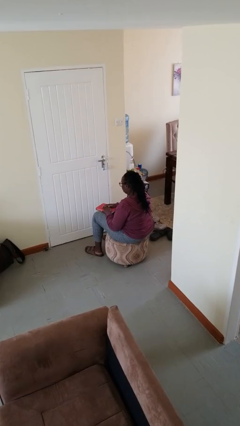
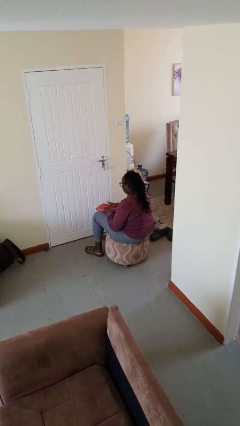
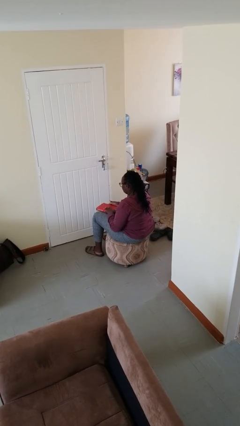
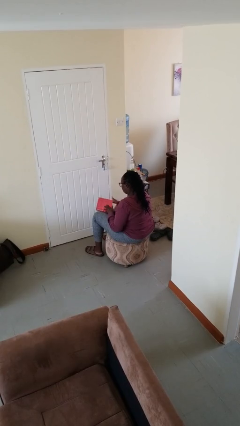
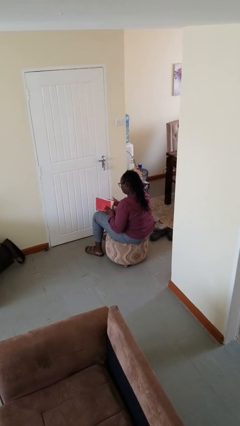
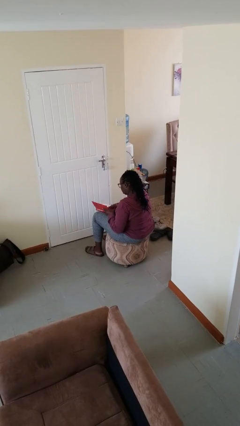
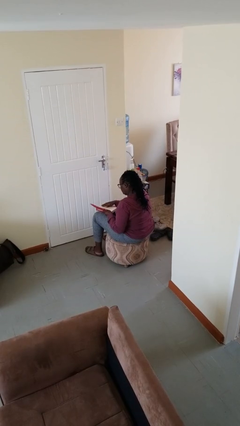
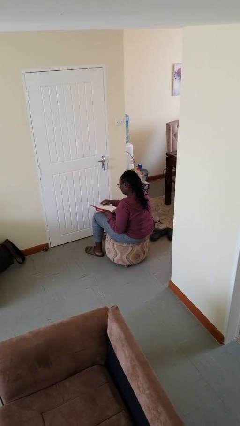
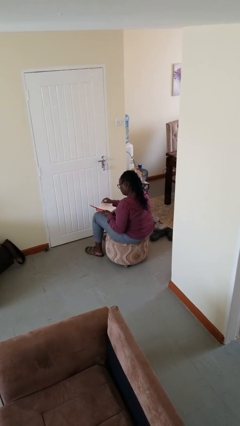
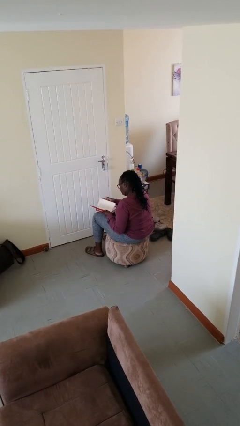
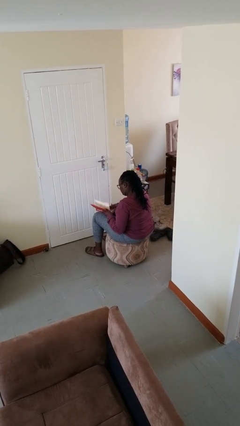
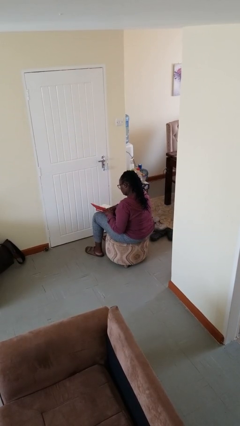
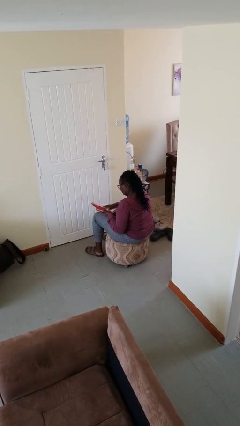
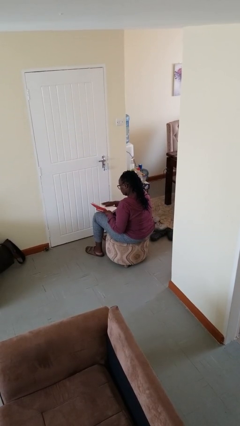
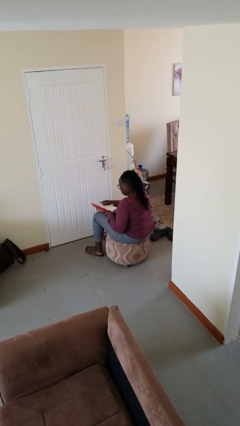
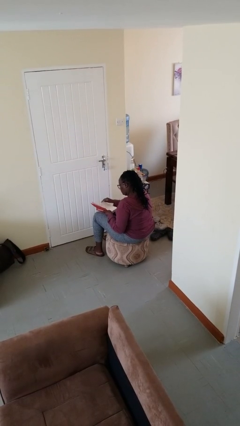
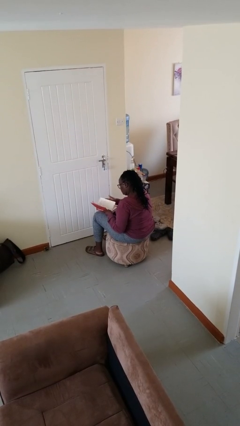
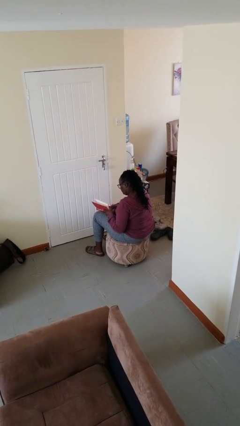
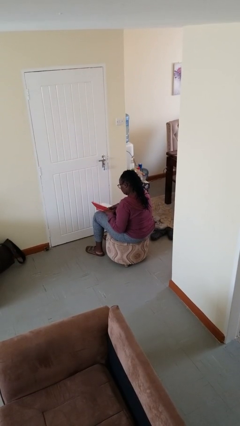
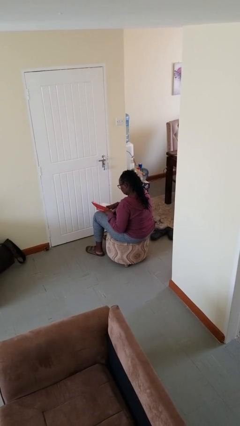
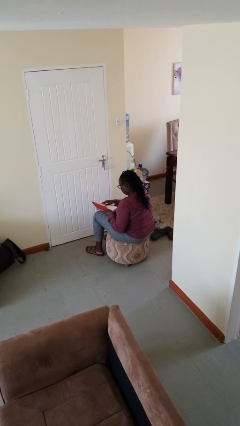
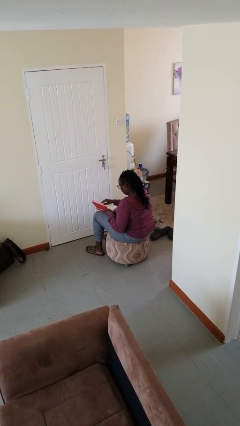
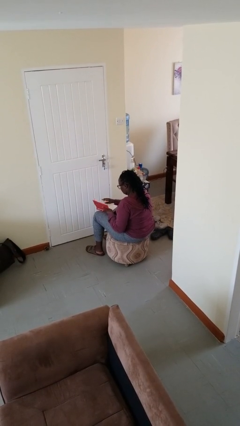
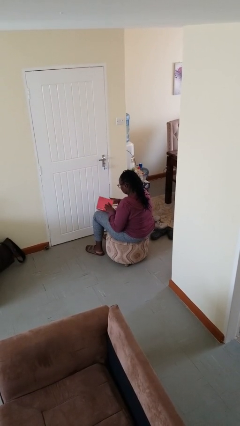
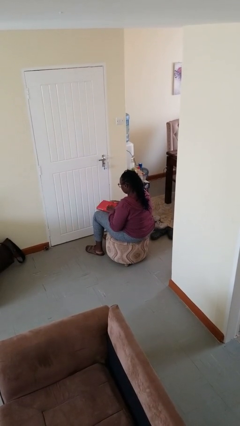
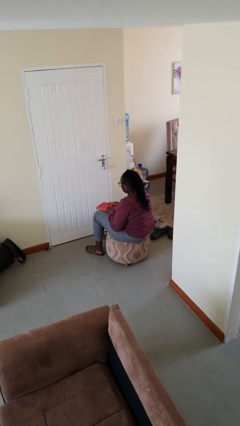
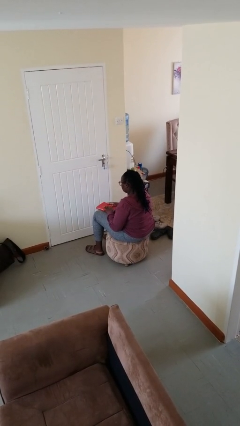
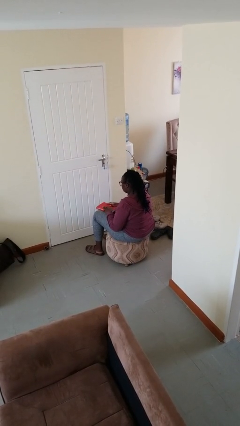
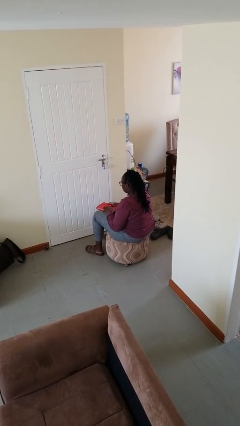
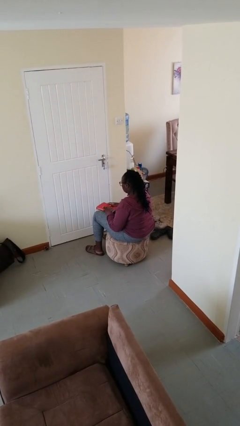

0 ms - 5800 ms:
person reads book

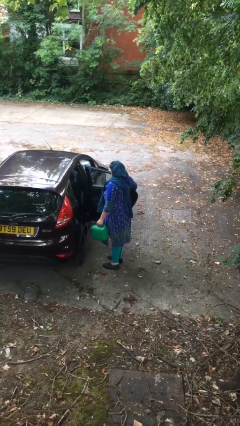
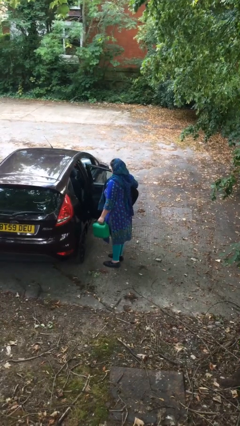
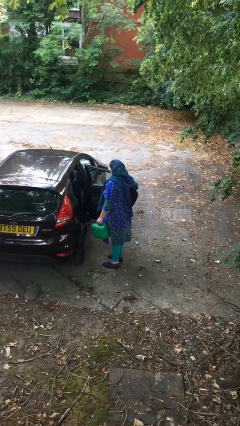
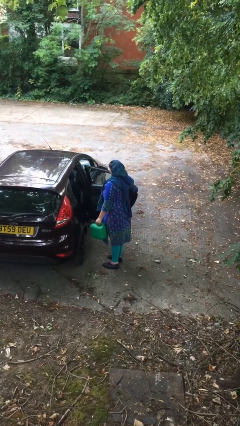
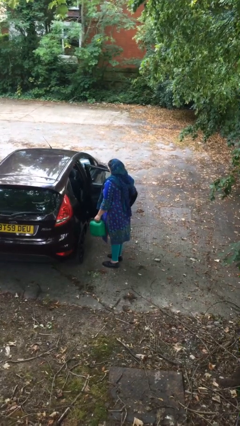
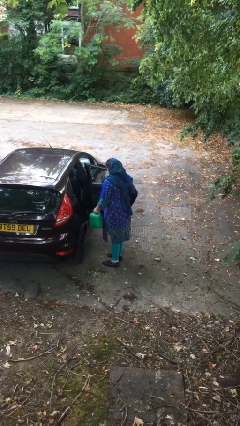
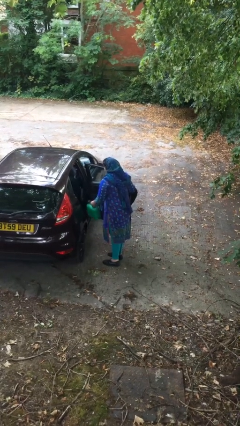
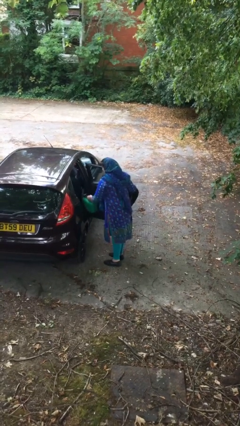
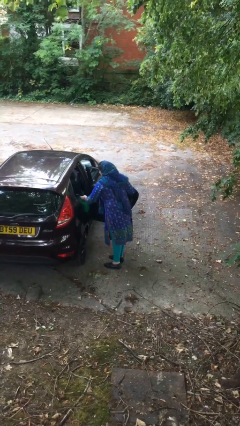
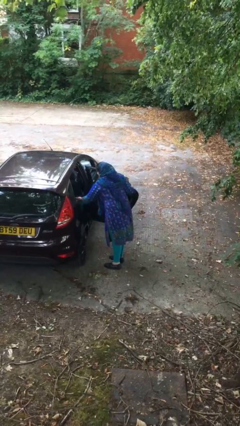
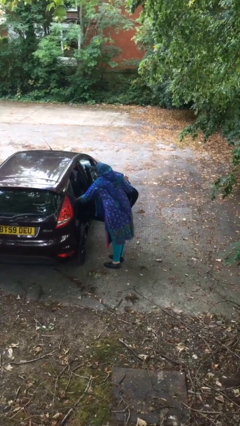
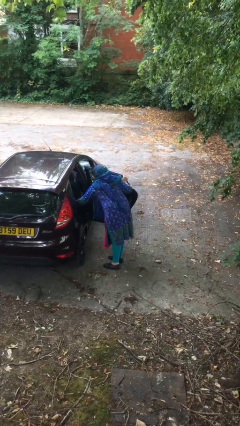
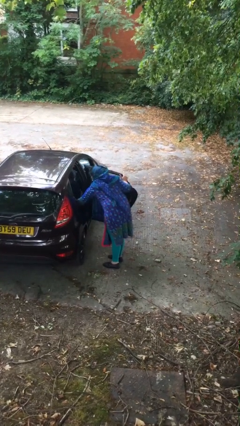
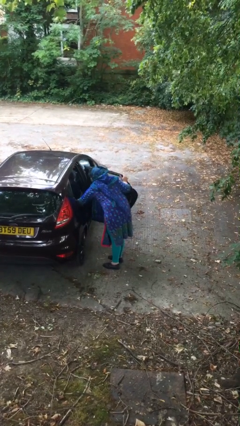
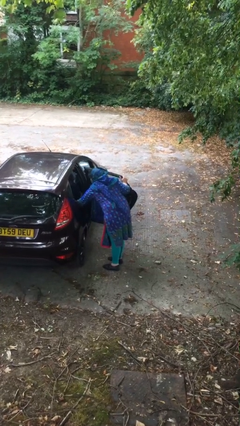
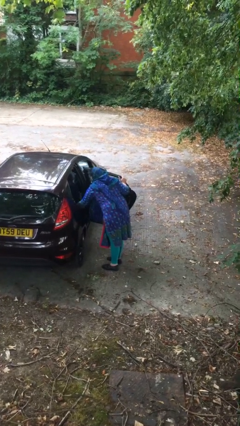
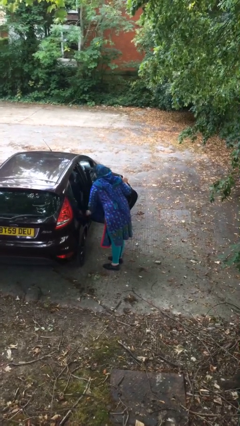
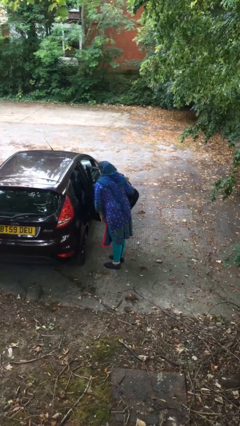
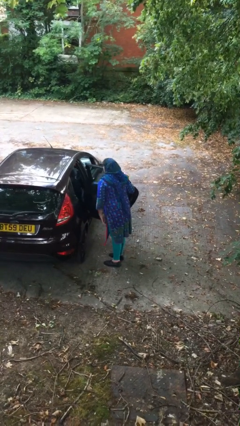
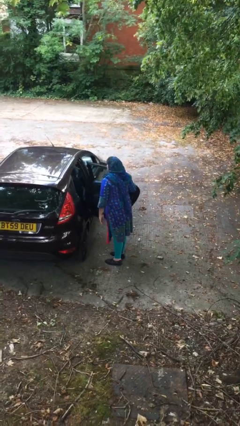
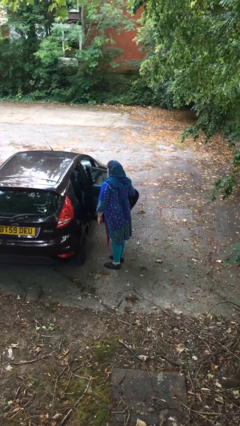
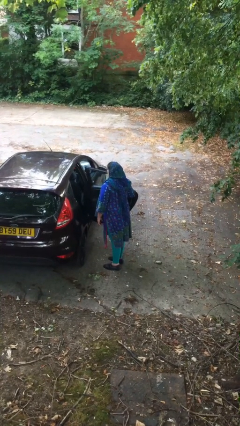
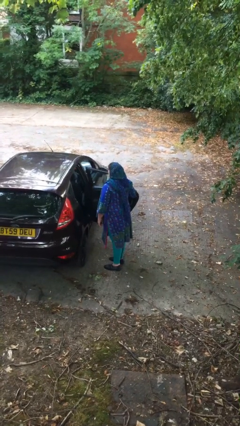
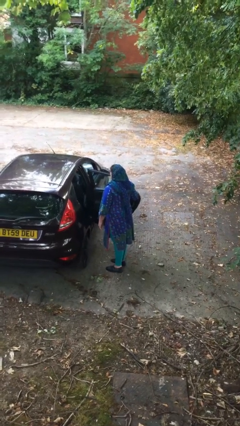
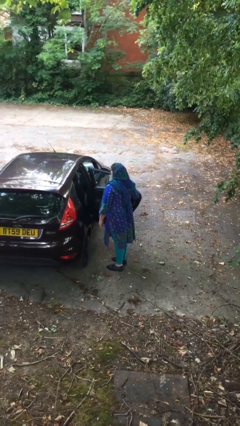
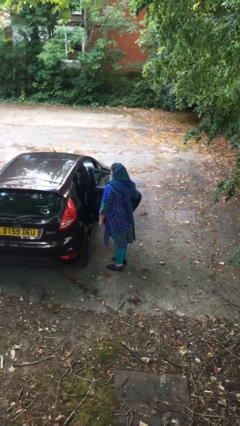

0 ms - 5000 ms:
person loads car

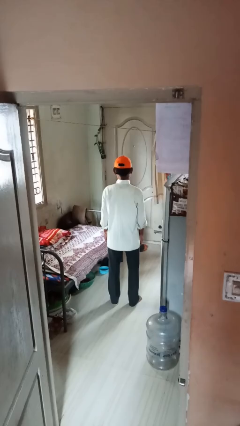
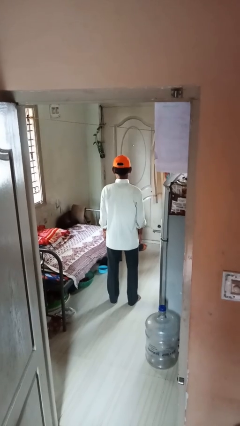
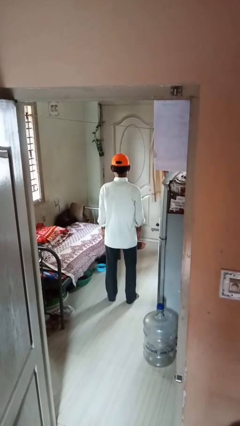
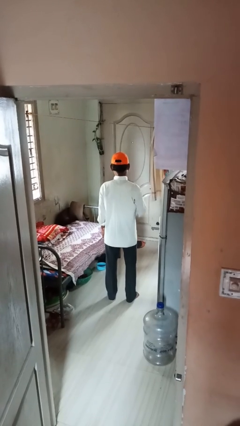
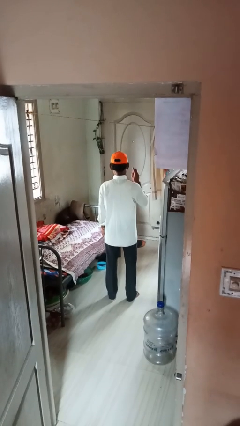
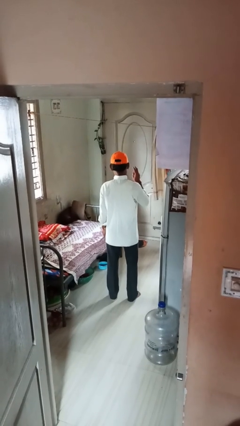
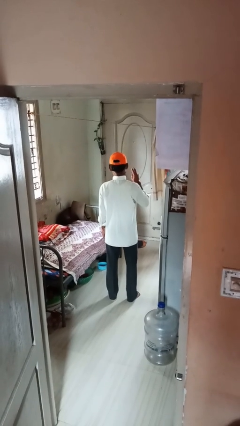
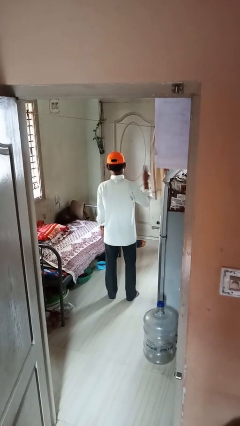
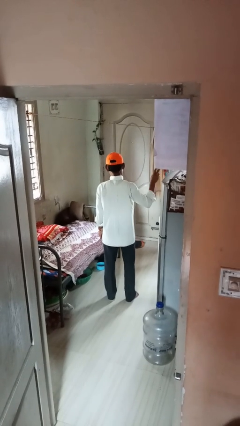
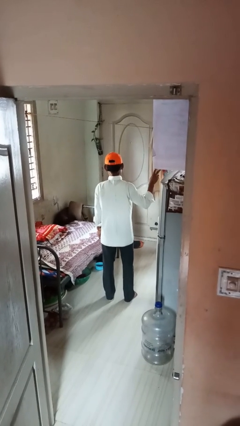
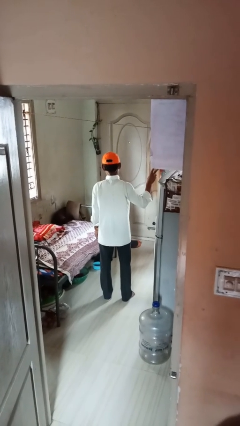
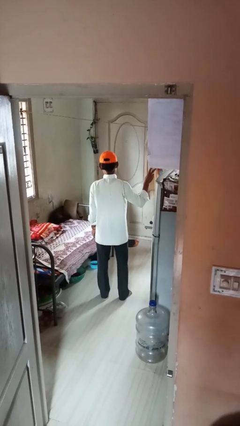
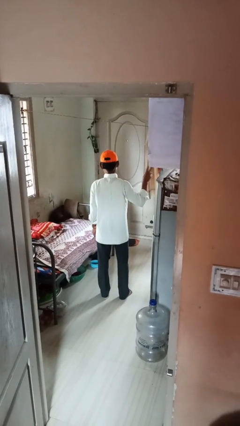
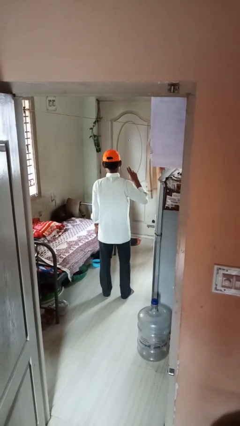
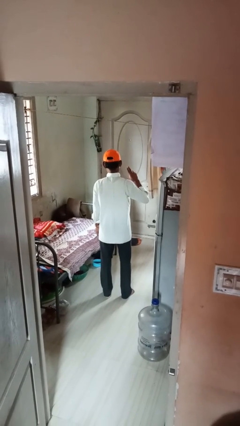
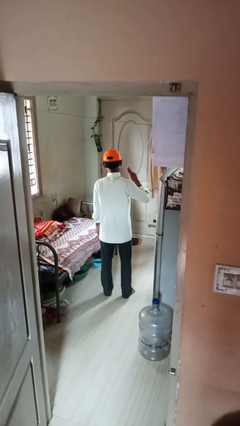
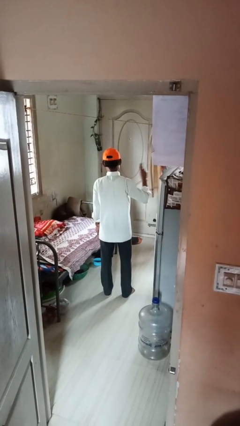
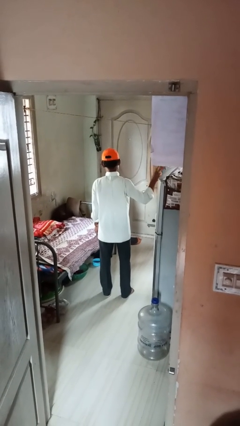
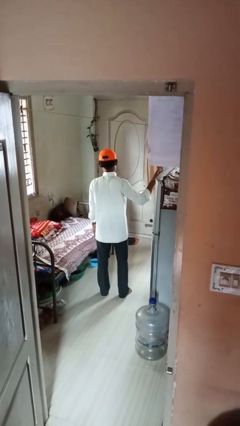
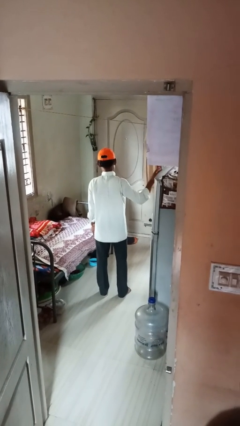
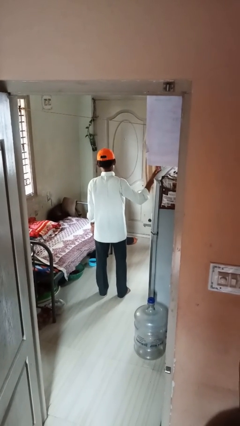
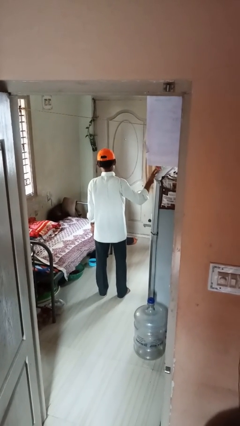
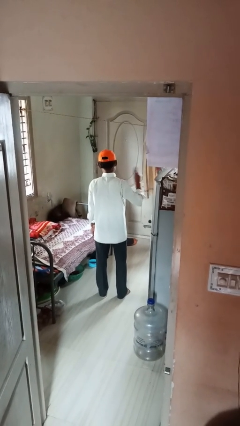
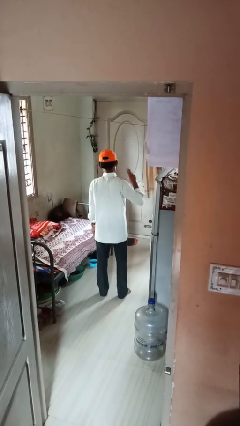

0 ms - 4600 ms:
person gestures swipe right

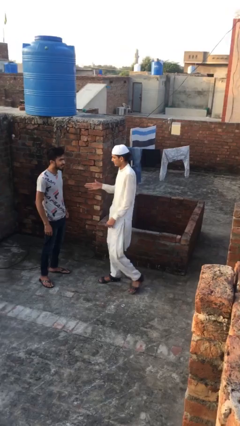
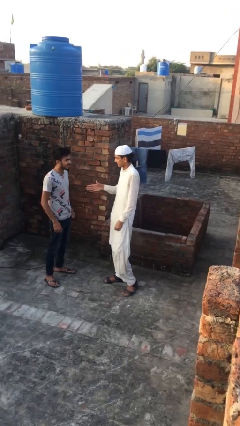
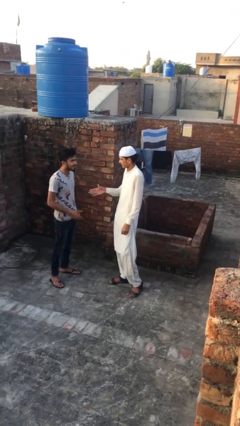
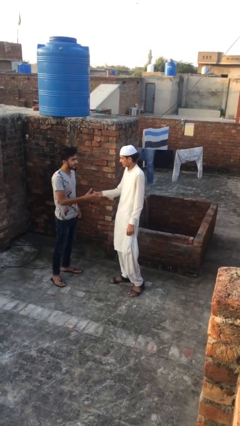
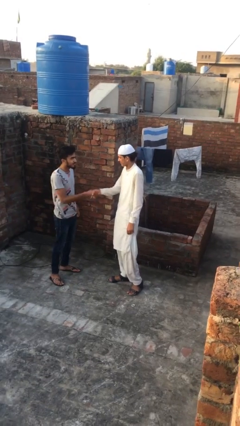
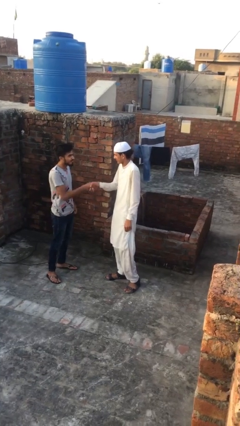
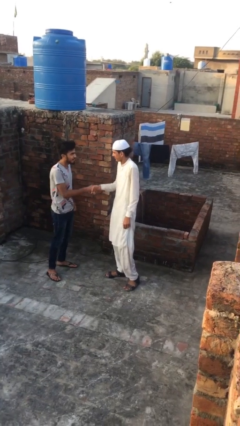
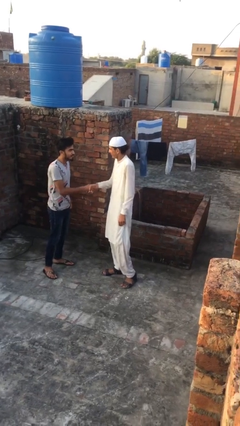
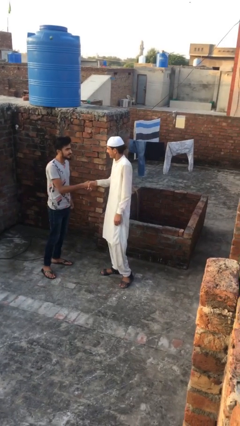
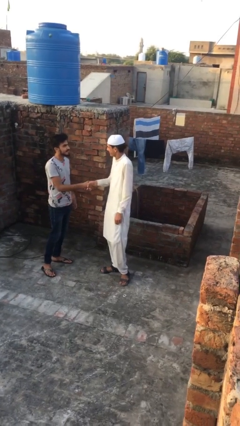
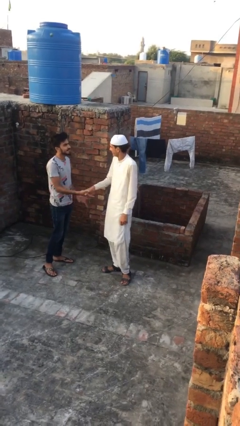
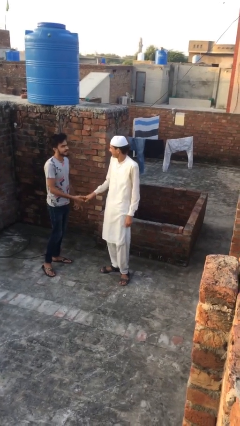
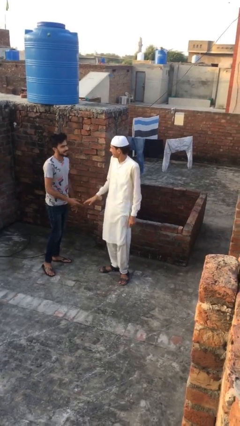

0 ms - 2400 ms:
person shakes hand

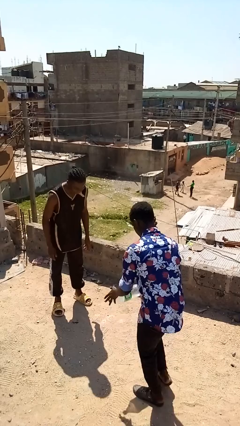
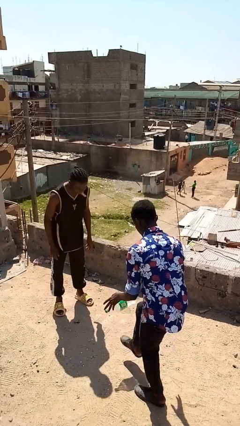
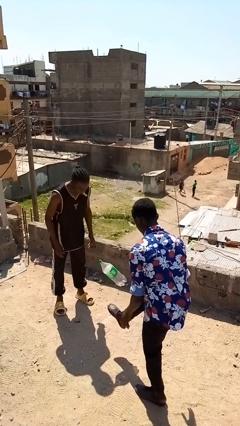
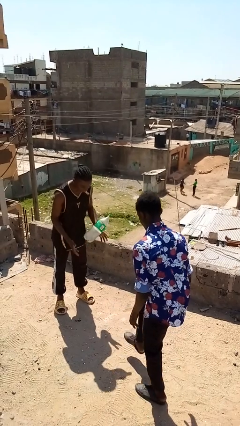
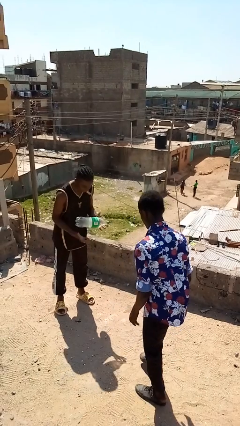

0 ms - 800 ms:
person kicks object to person
